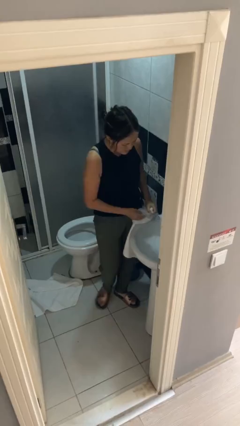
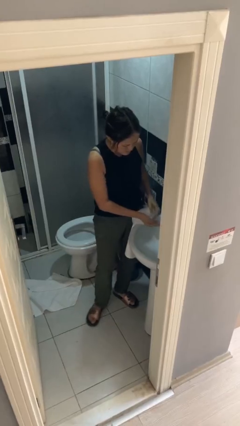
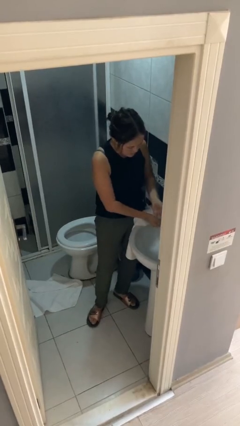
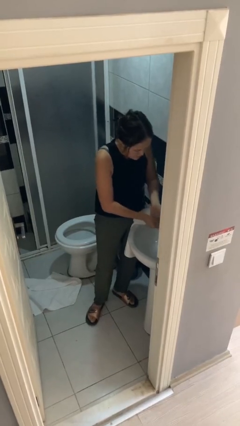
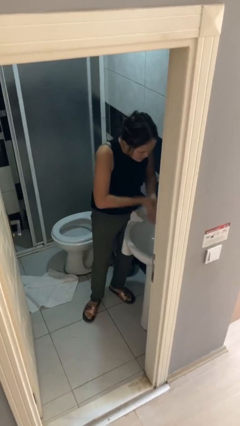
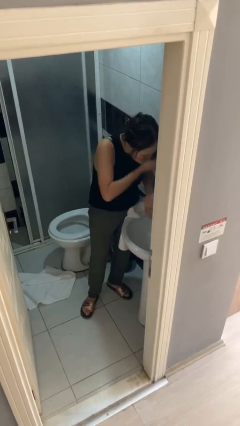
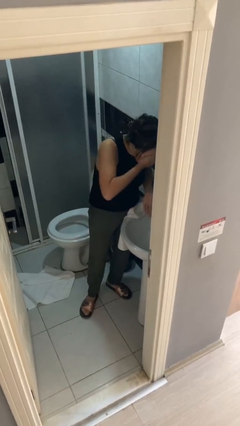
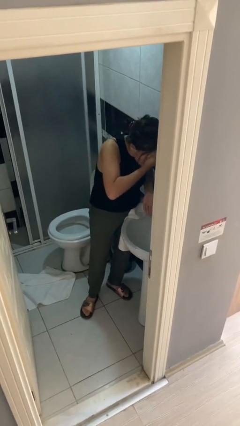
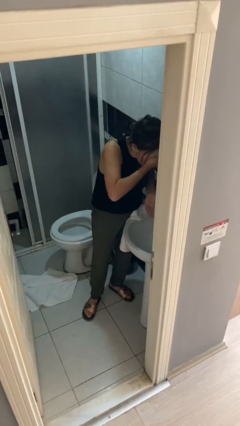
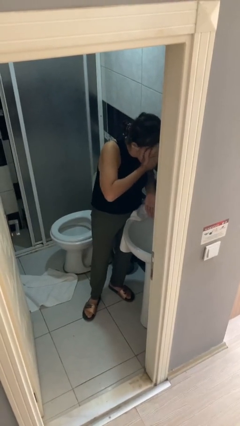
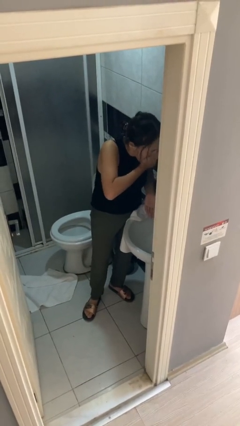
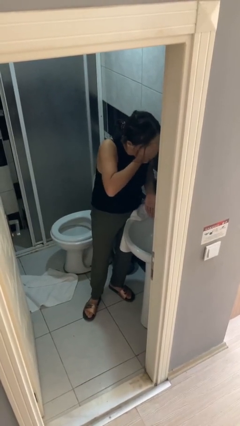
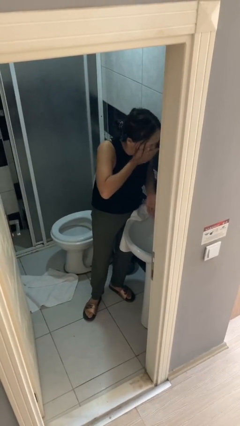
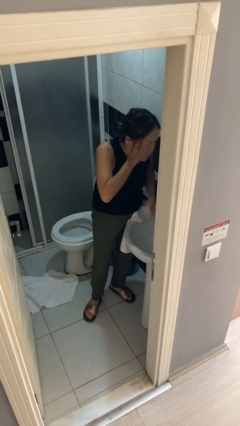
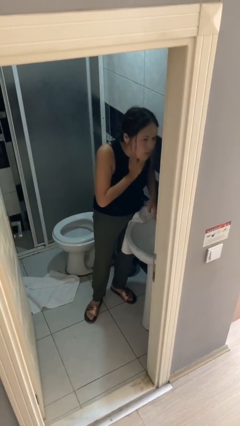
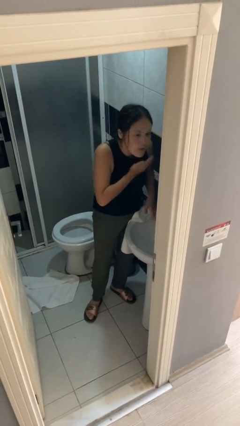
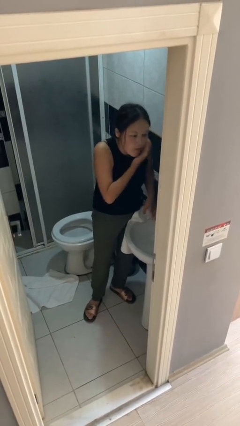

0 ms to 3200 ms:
person washes face

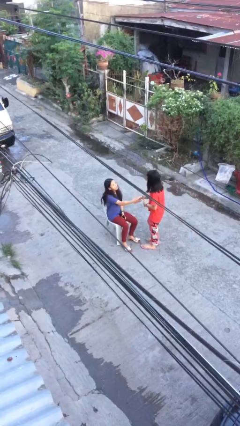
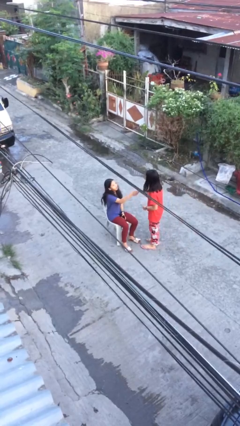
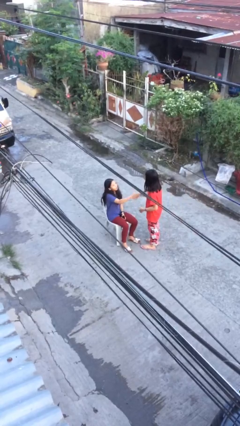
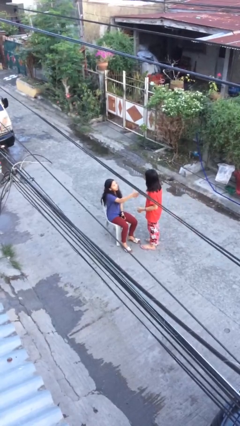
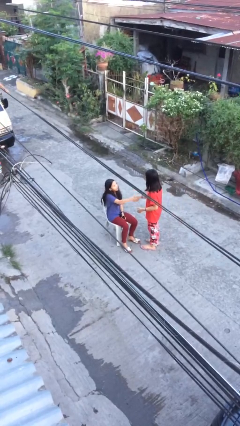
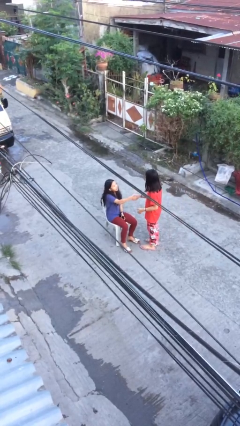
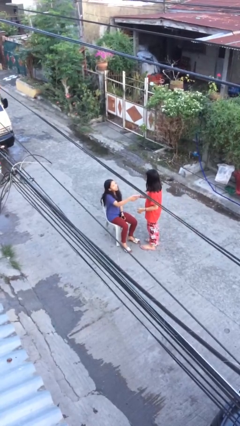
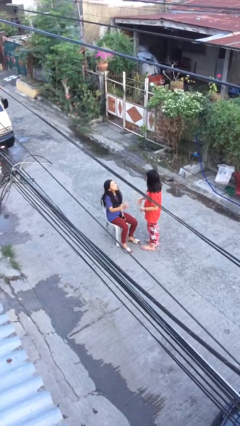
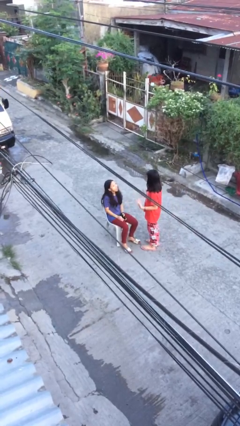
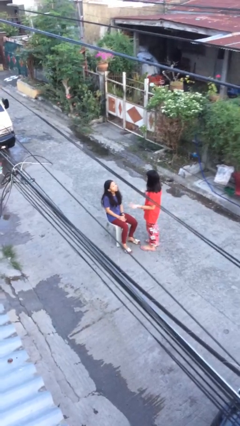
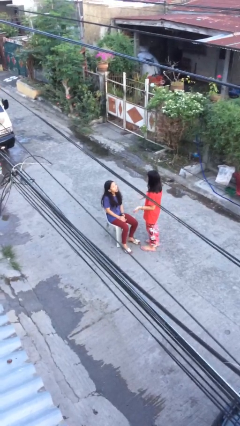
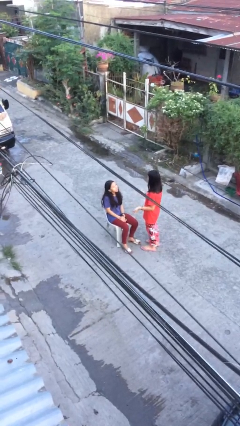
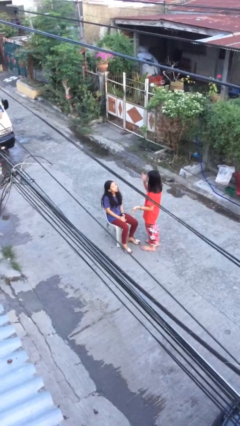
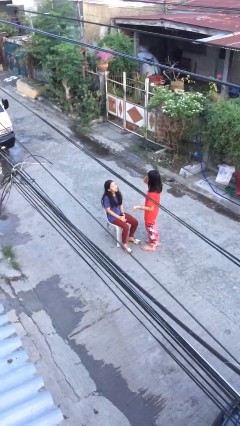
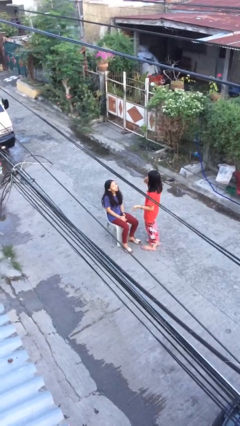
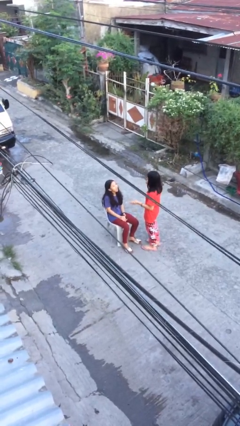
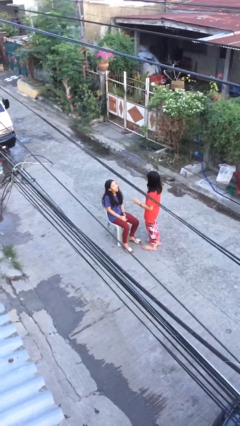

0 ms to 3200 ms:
person shakes hand

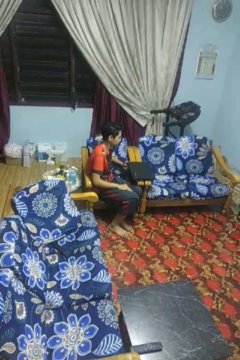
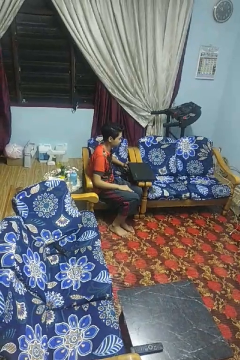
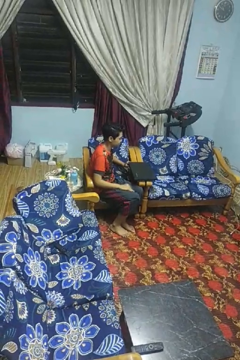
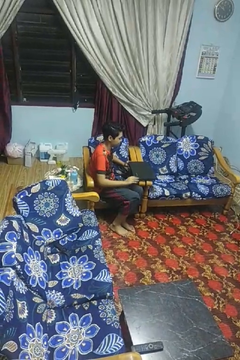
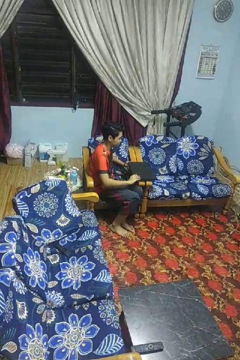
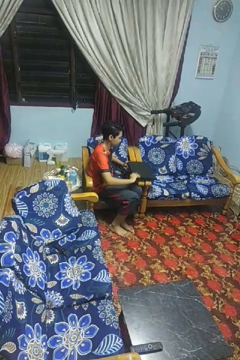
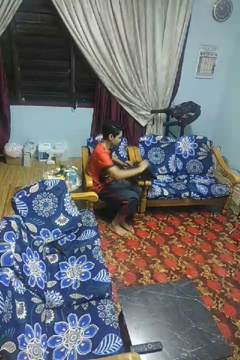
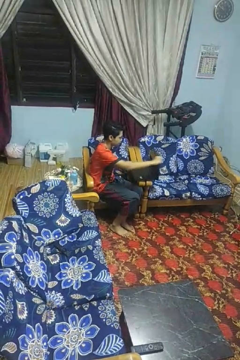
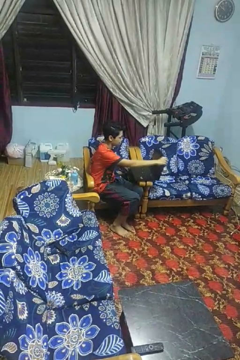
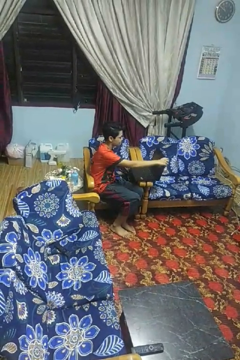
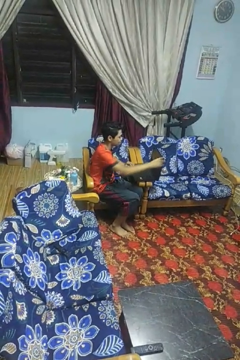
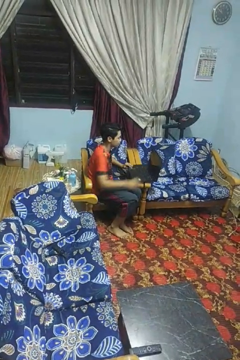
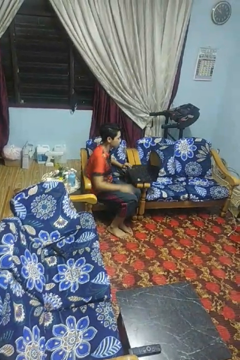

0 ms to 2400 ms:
person opens laptop

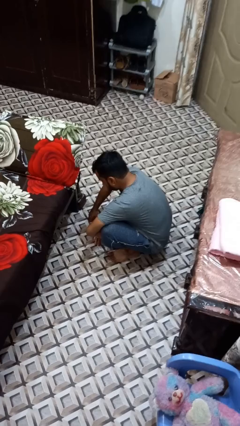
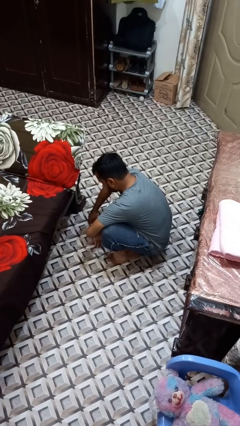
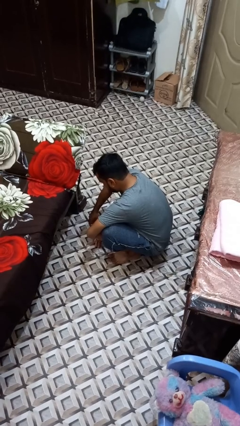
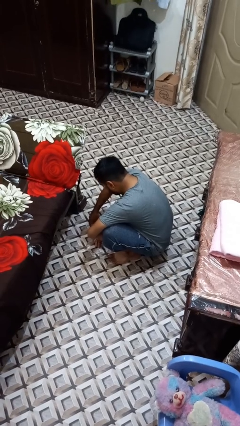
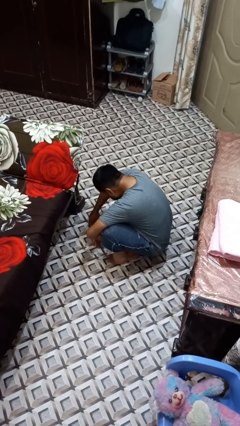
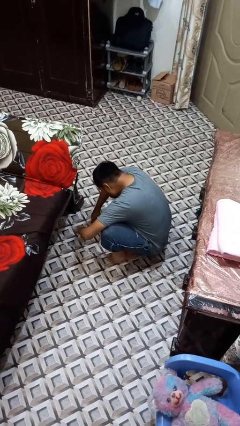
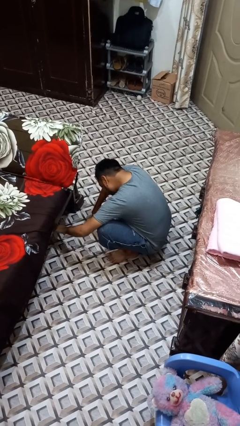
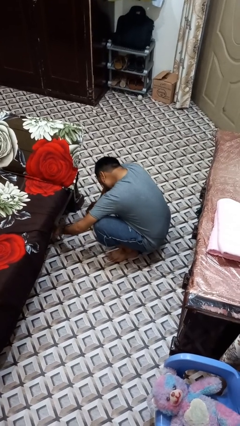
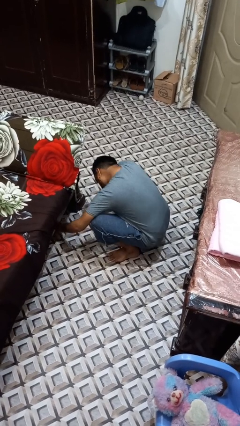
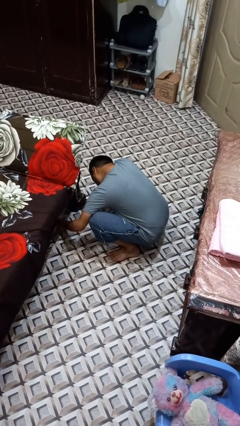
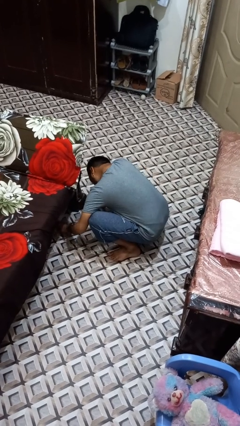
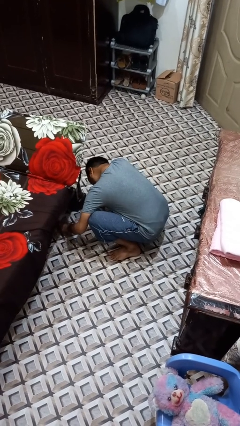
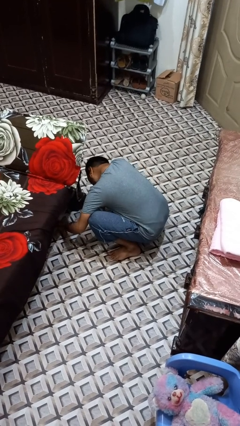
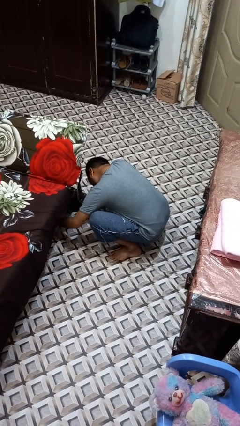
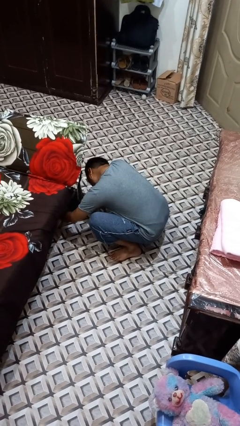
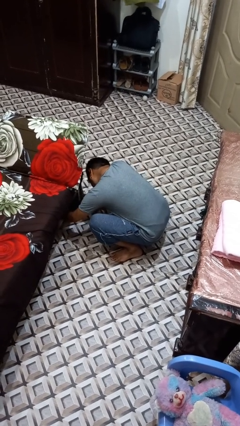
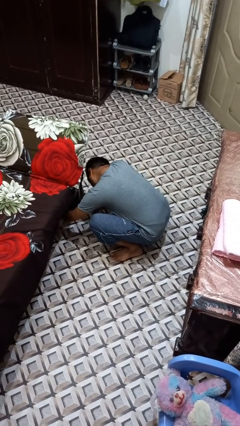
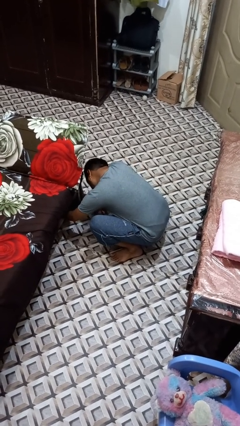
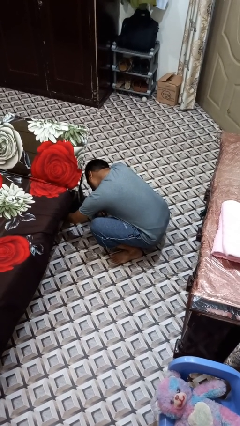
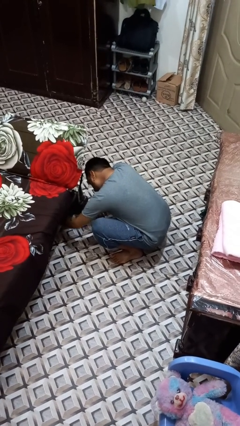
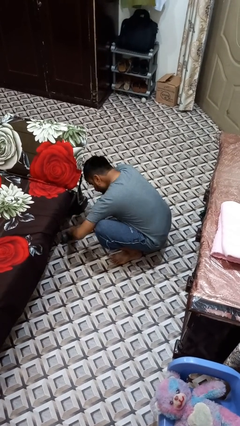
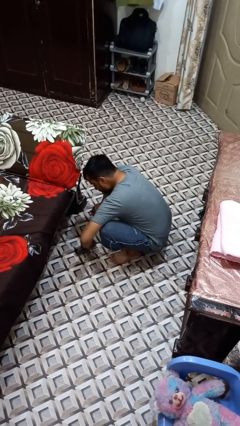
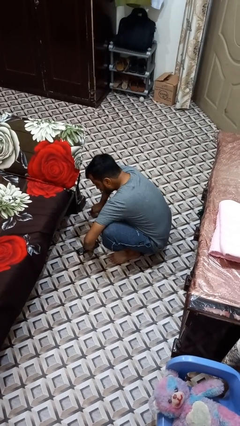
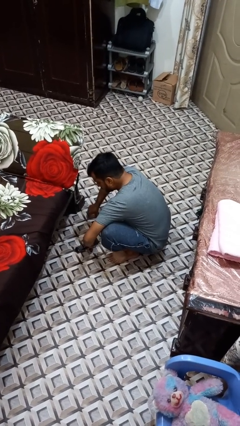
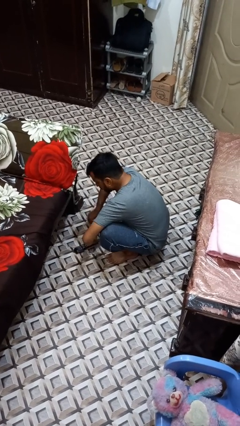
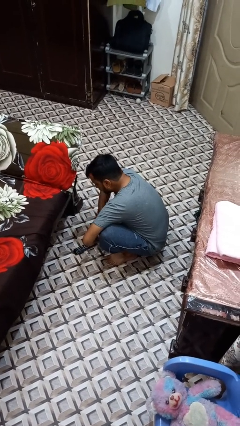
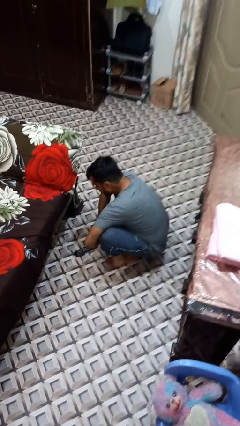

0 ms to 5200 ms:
person searches under couch

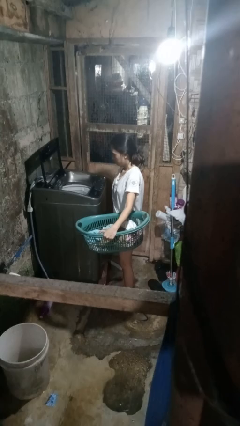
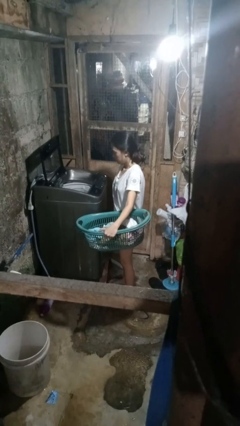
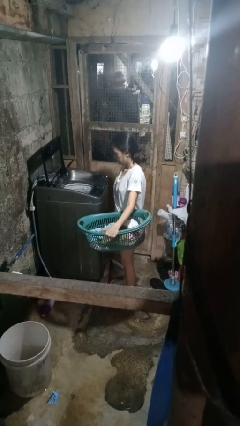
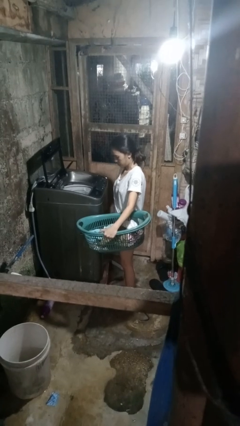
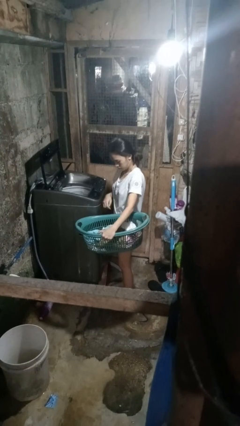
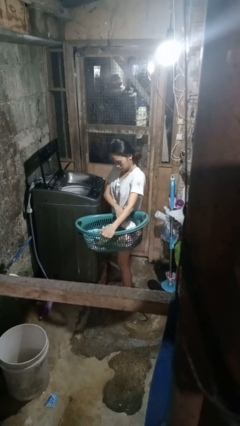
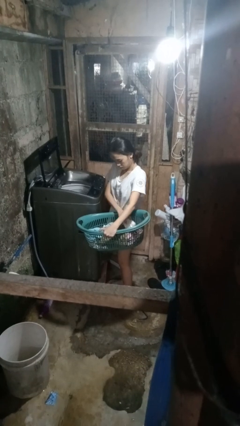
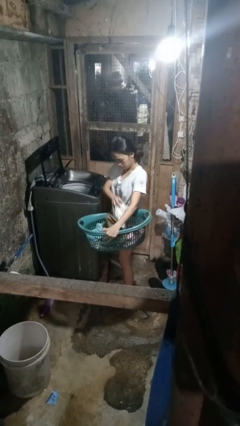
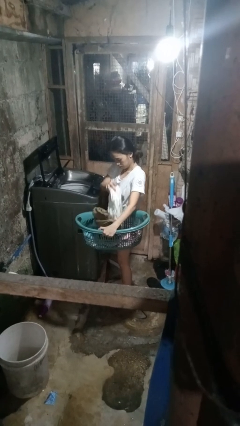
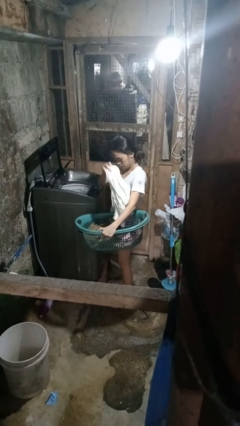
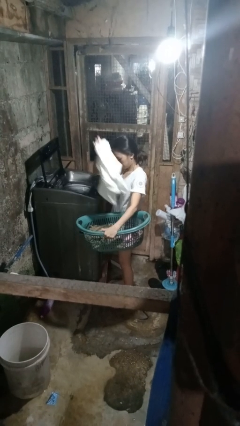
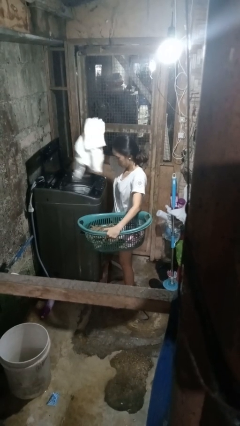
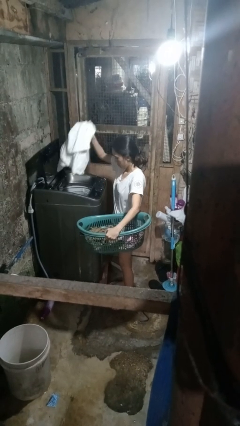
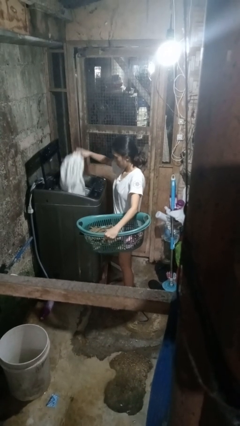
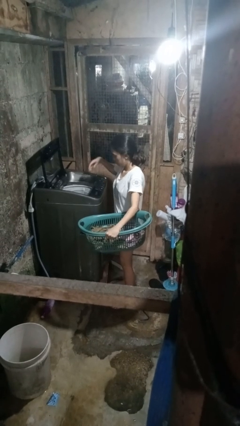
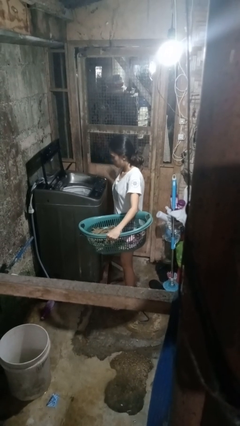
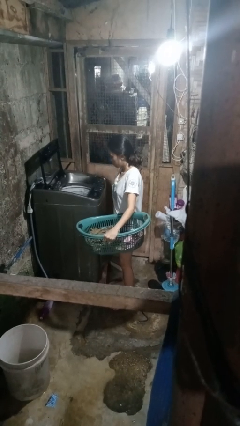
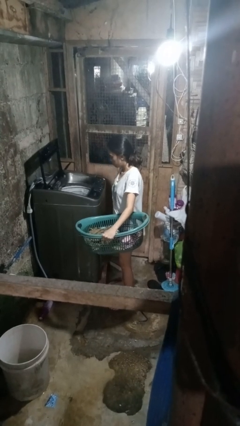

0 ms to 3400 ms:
person loads clotheswasher

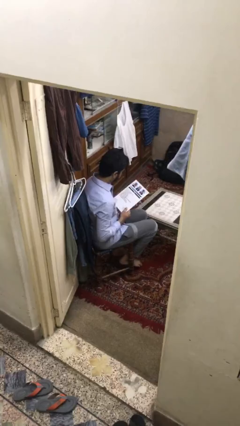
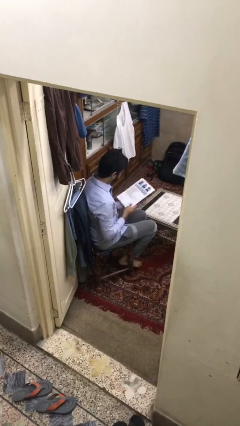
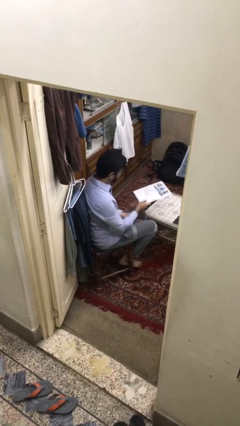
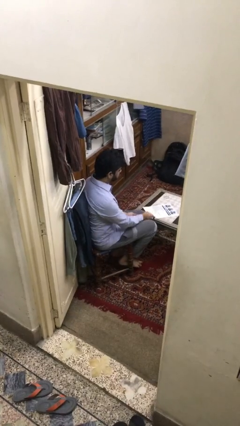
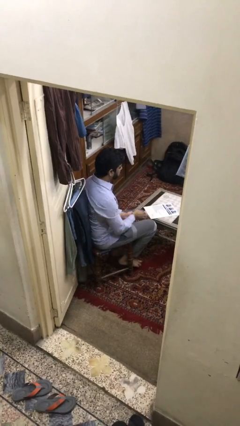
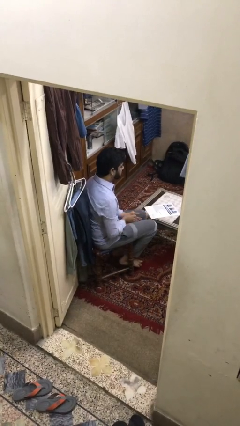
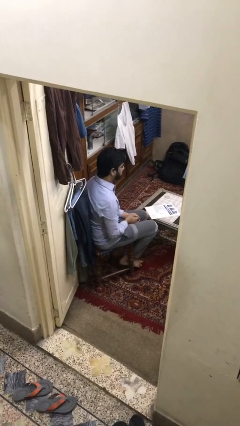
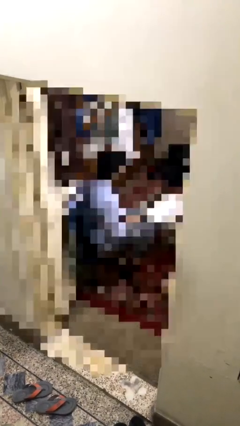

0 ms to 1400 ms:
person puts down object on table
